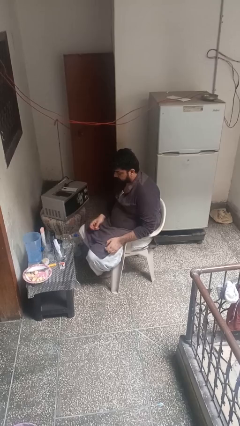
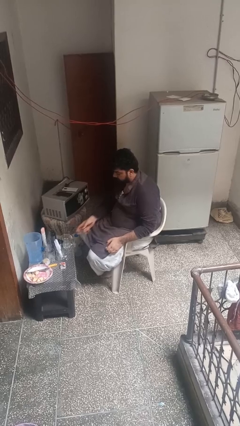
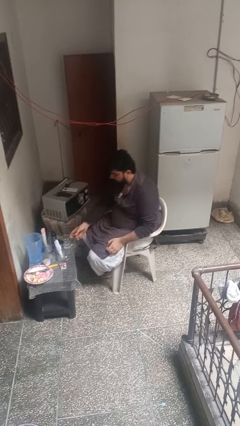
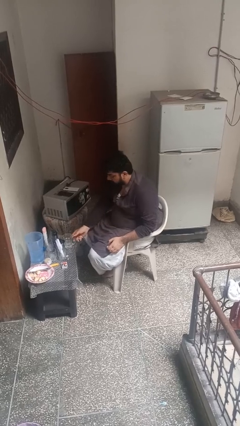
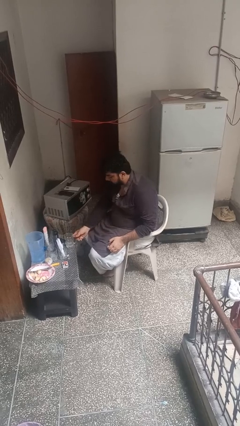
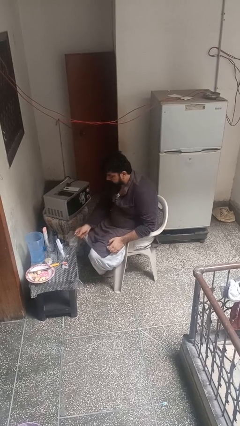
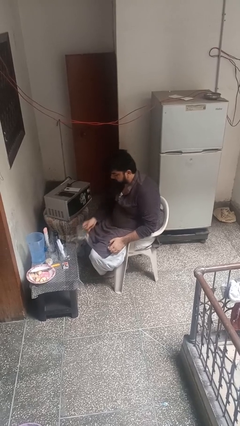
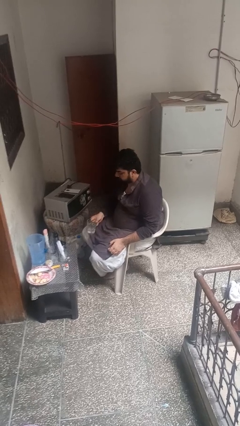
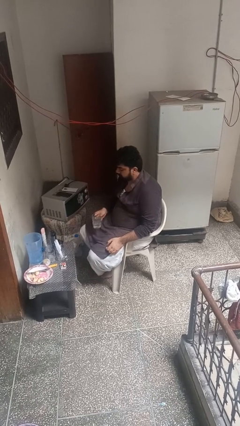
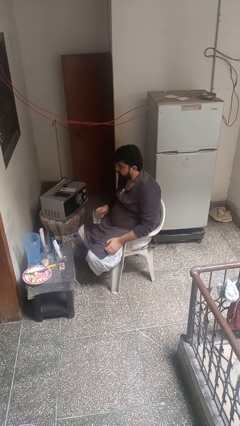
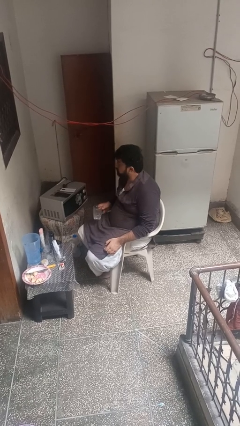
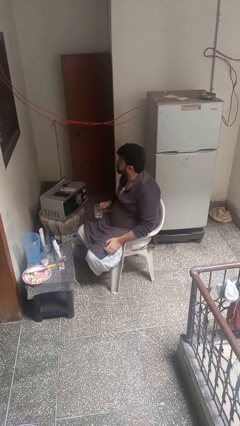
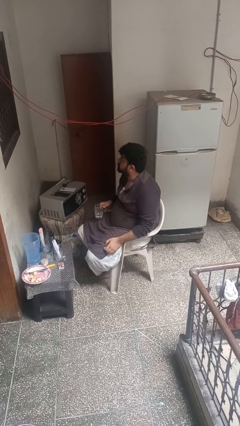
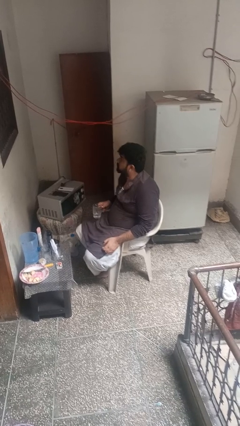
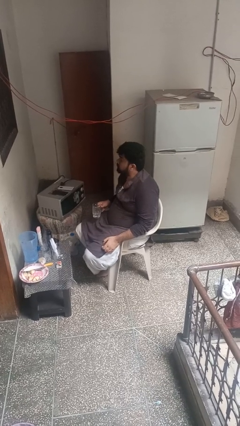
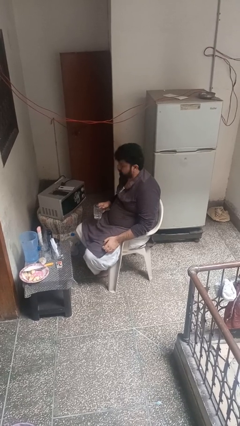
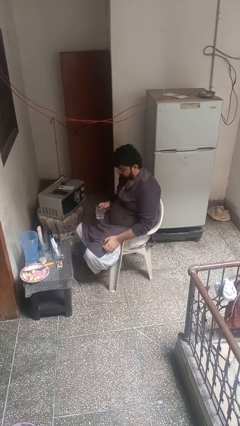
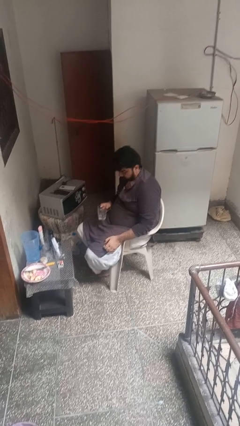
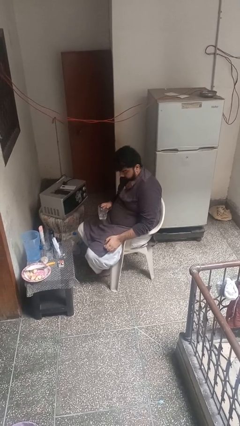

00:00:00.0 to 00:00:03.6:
person picks up object from table

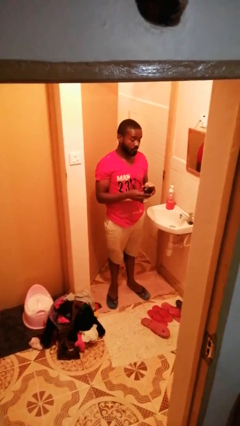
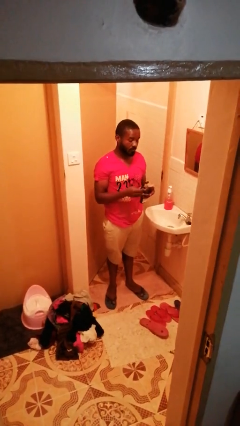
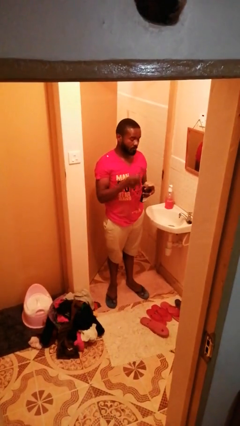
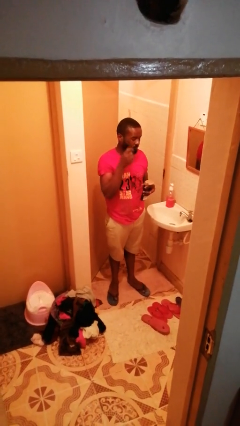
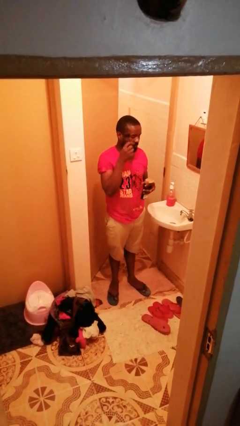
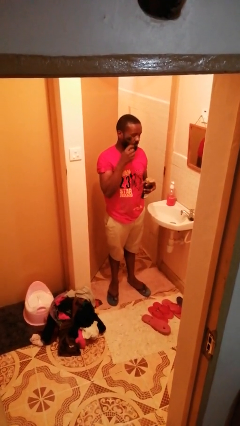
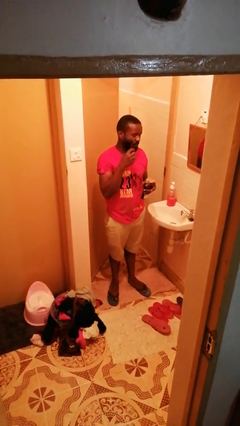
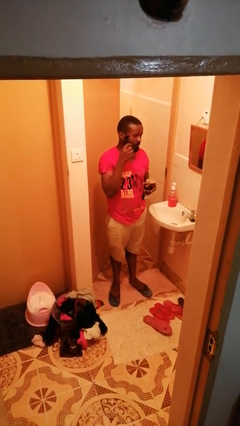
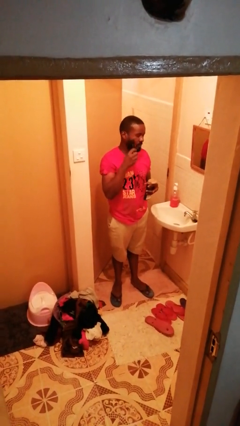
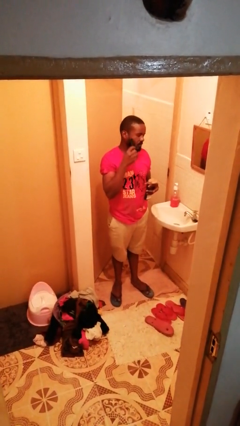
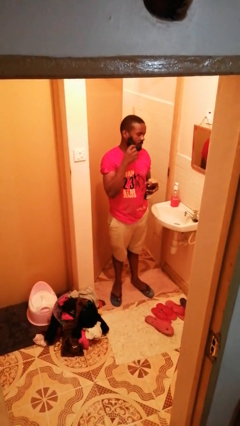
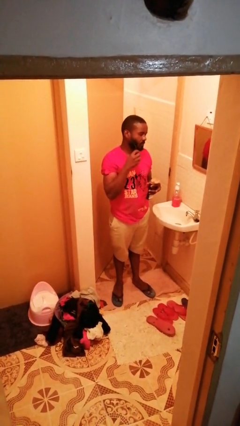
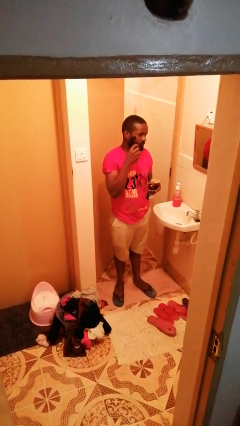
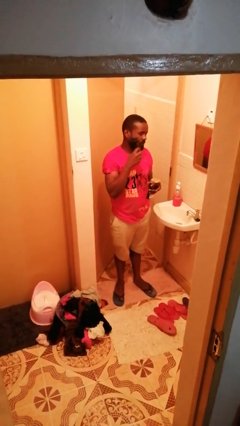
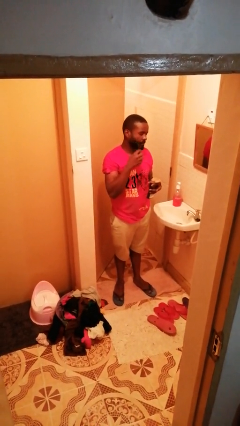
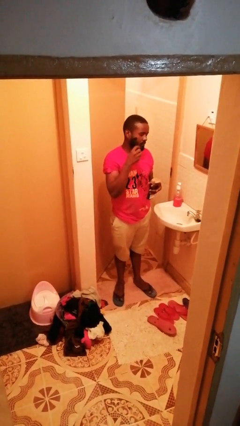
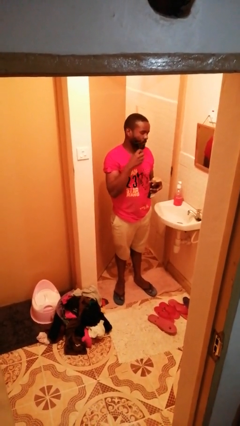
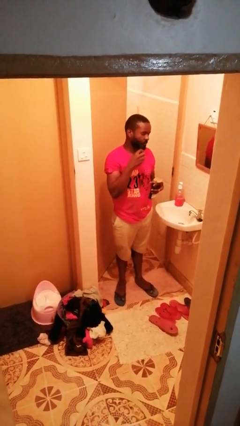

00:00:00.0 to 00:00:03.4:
person shaves face

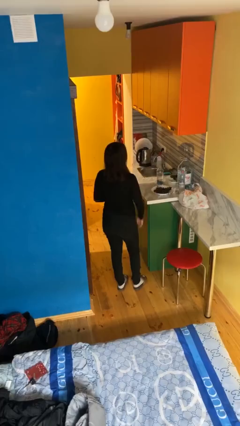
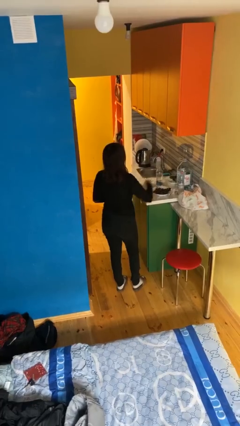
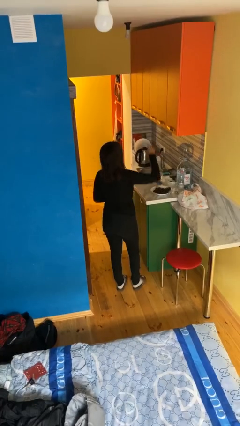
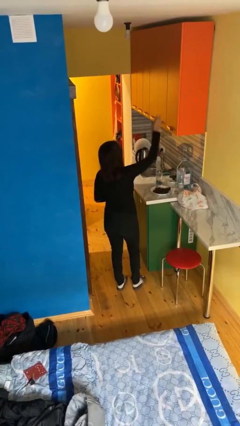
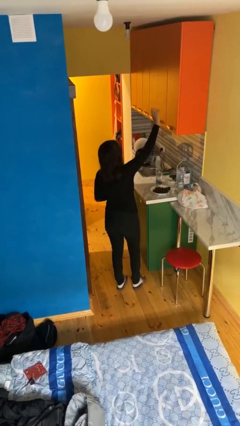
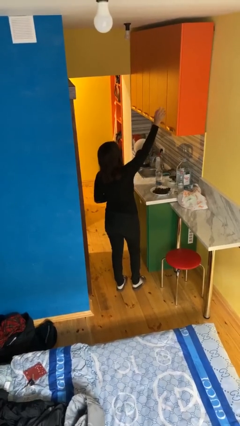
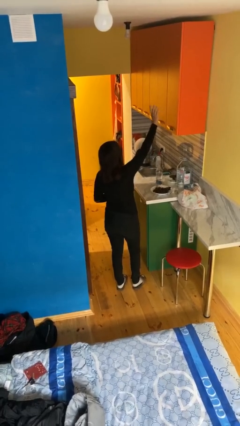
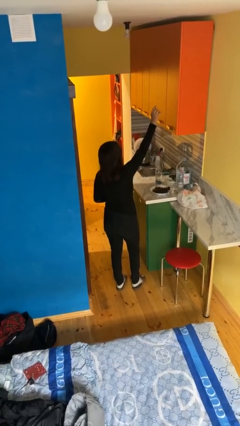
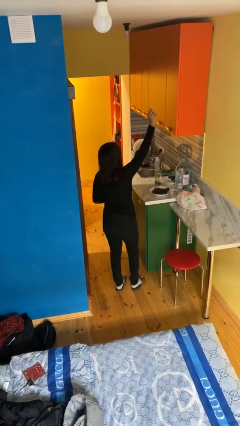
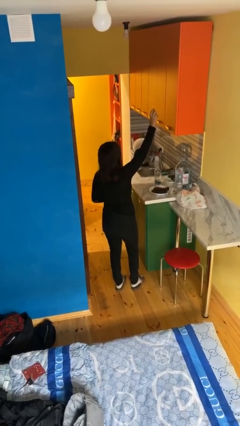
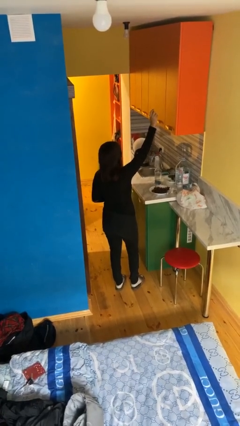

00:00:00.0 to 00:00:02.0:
person gestures raise hand

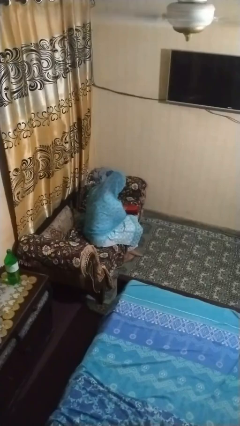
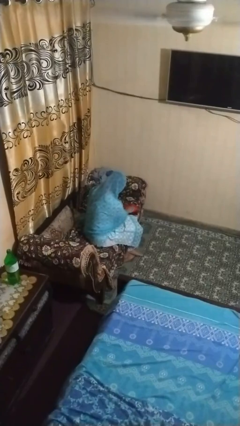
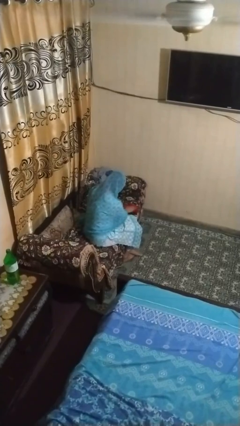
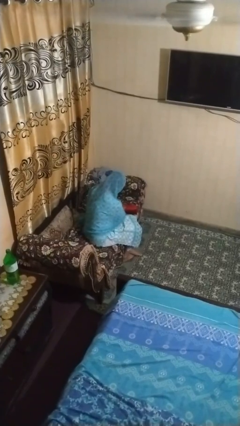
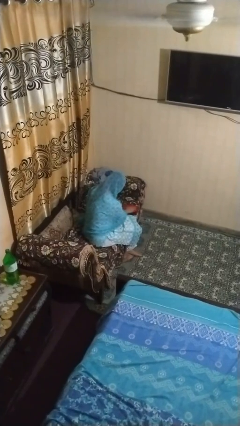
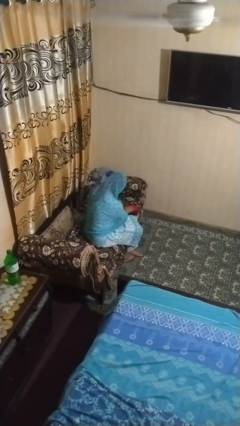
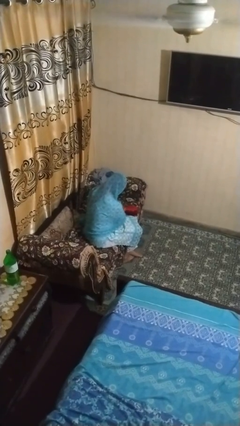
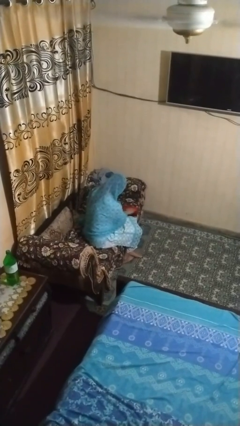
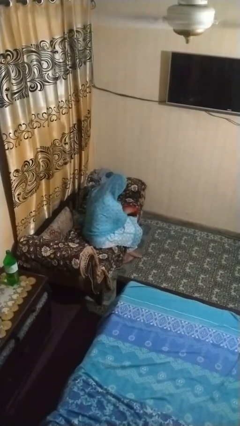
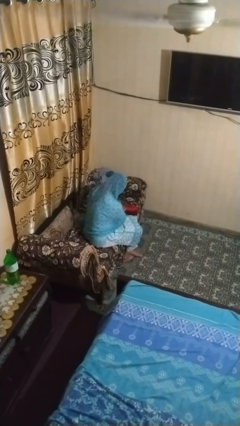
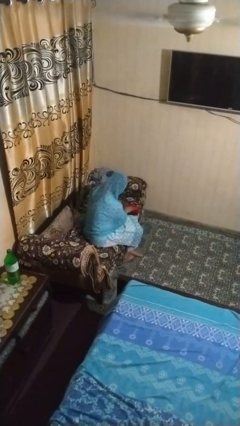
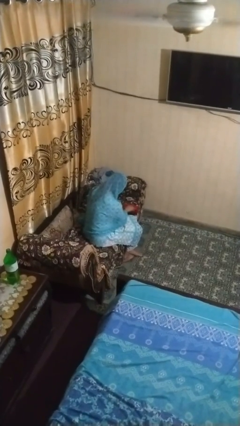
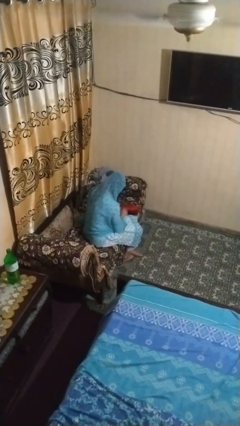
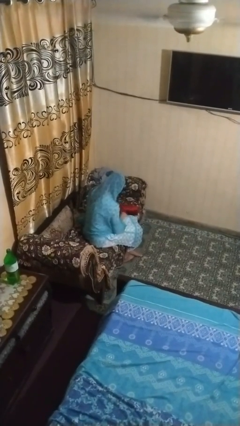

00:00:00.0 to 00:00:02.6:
person waves hand over object

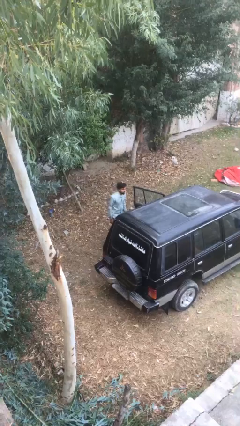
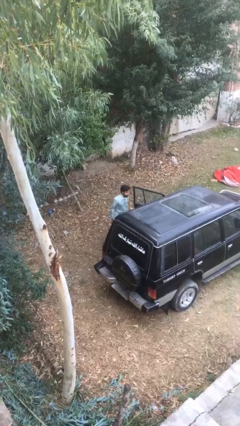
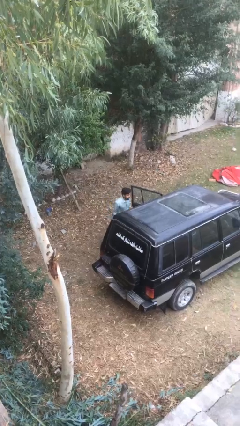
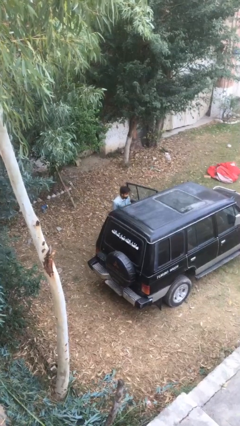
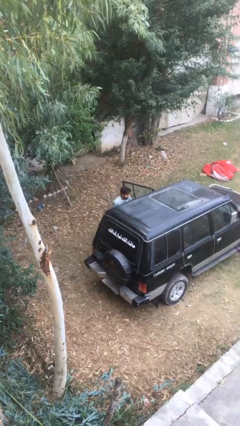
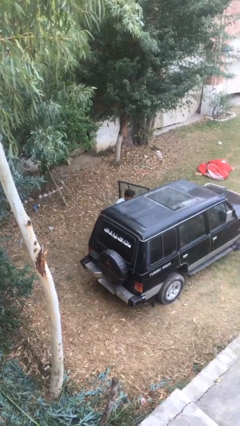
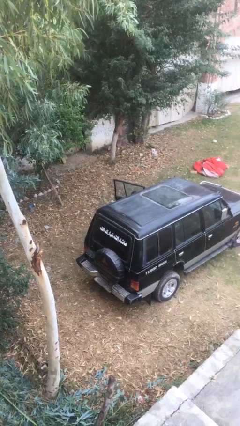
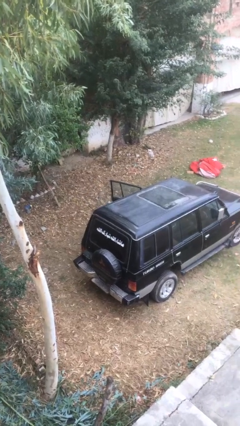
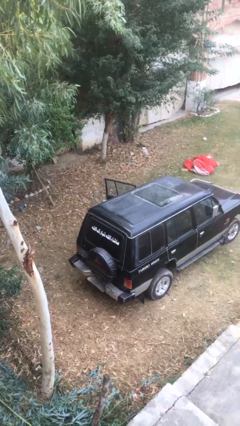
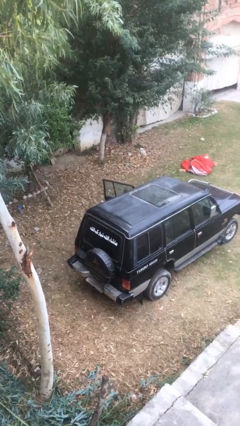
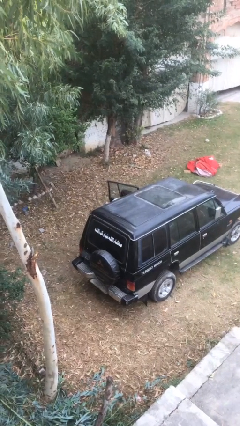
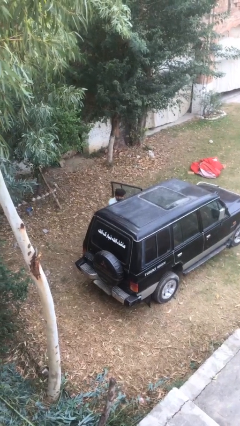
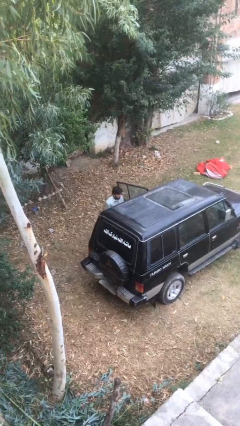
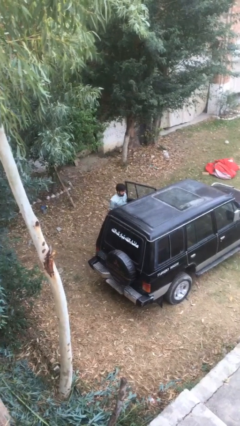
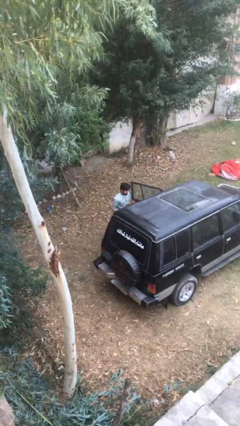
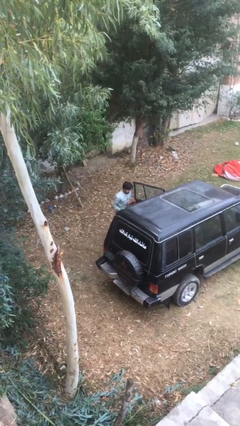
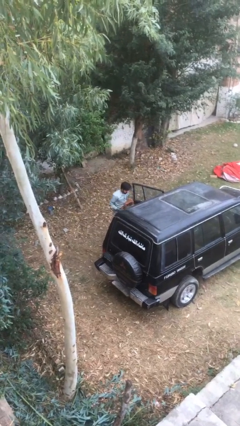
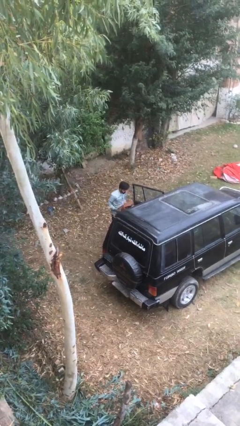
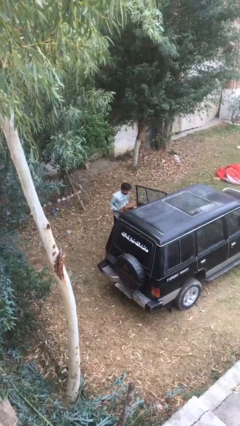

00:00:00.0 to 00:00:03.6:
person unloads car

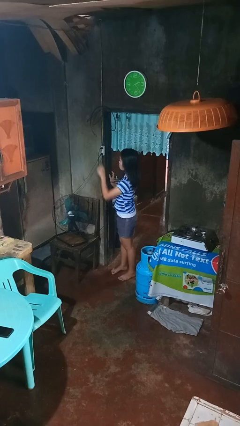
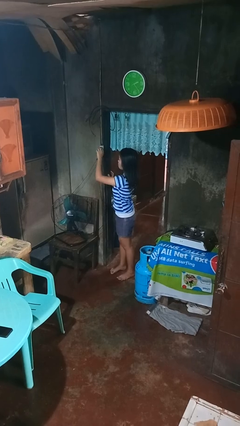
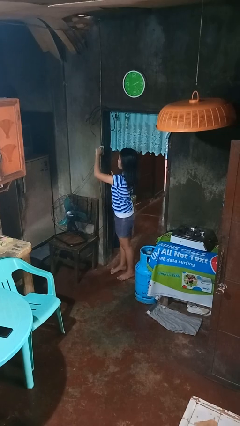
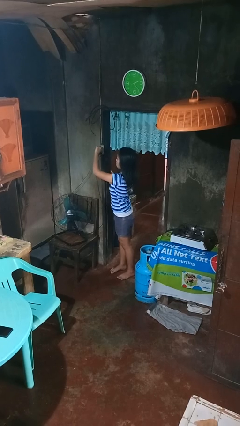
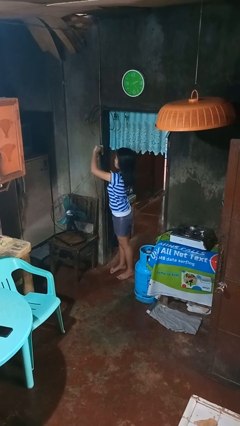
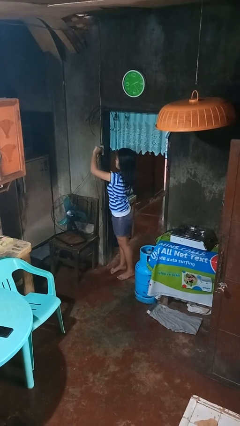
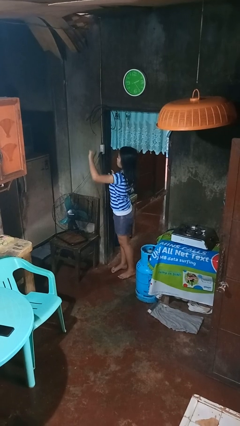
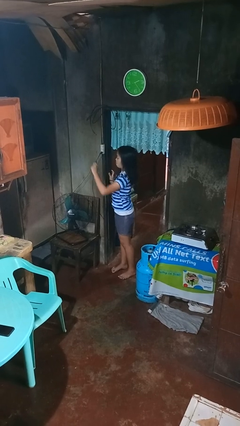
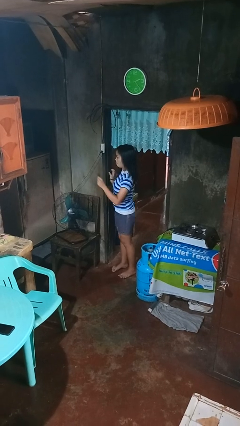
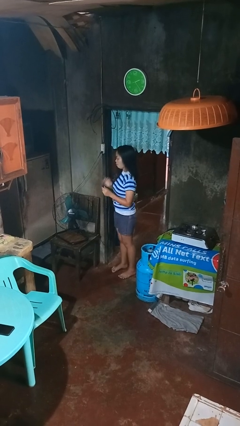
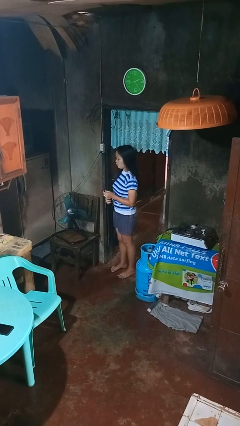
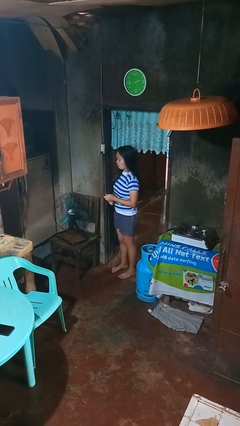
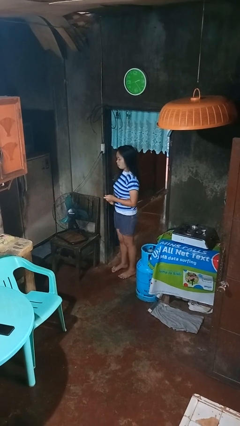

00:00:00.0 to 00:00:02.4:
person unplugs from electrical socket
